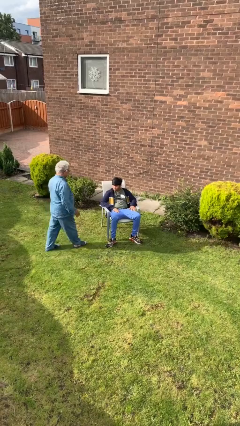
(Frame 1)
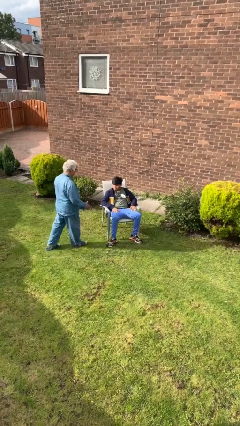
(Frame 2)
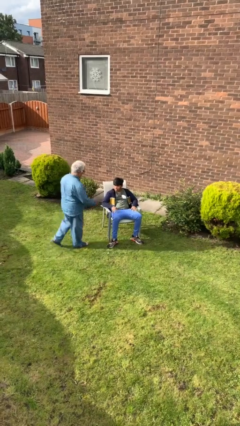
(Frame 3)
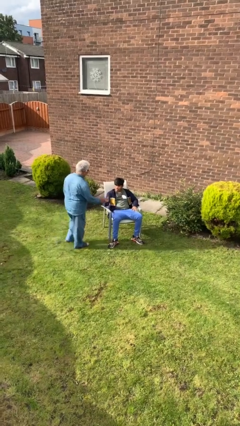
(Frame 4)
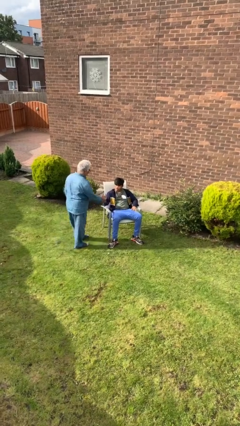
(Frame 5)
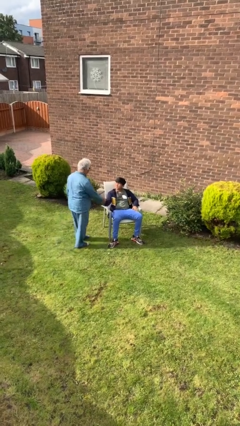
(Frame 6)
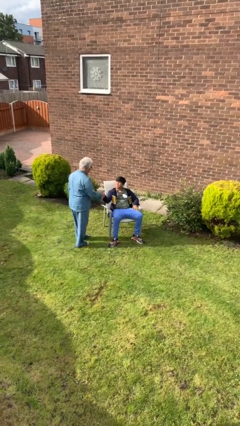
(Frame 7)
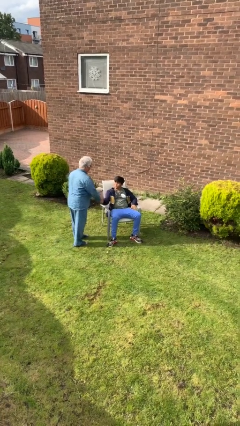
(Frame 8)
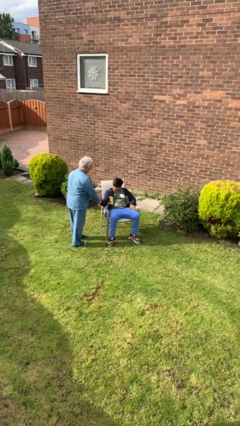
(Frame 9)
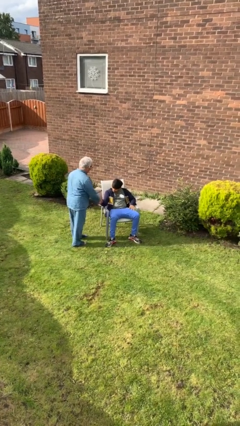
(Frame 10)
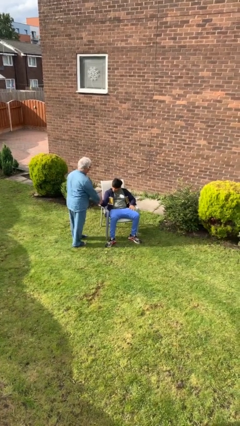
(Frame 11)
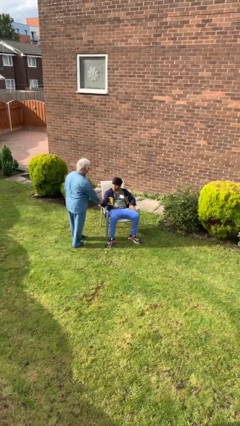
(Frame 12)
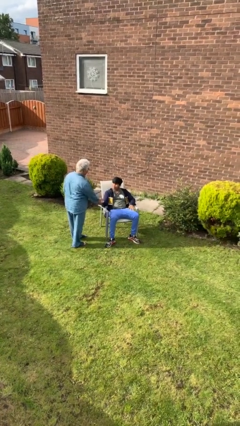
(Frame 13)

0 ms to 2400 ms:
person shakes hand

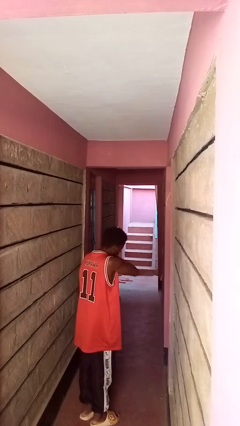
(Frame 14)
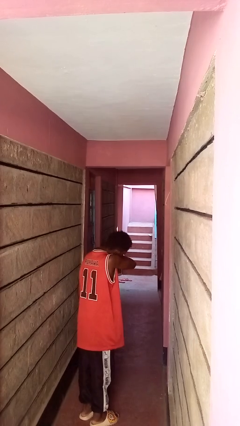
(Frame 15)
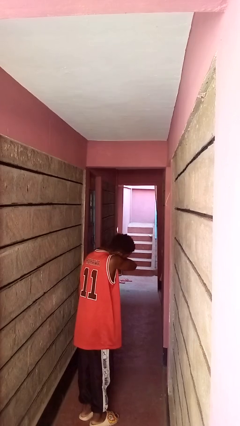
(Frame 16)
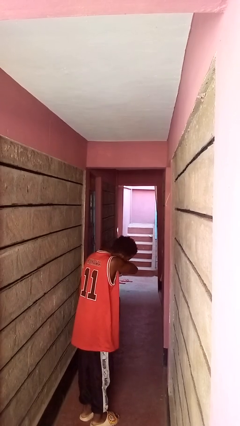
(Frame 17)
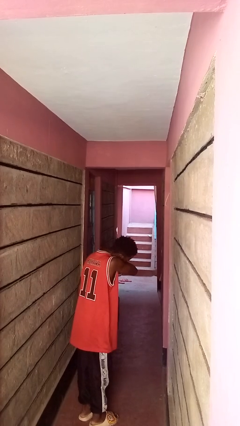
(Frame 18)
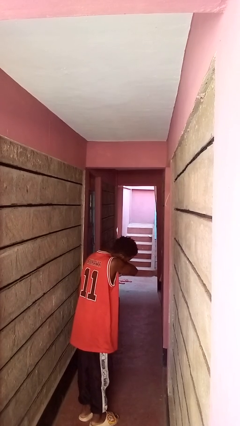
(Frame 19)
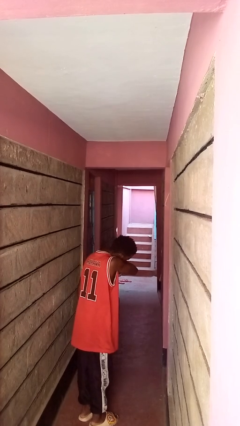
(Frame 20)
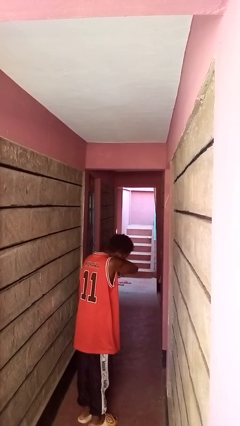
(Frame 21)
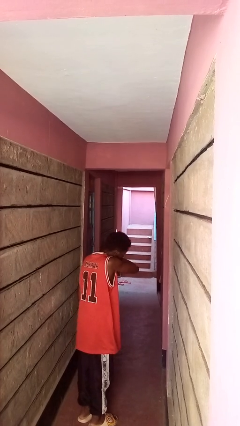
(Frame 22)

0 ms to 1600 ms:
person sneezes into arm

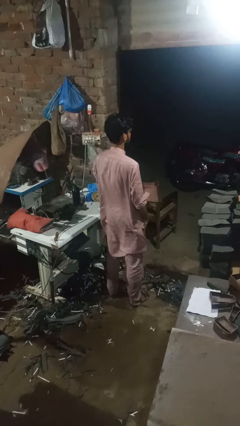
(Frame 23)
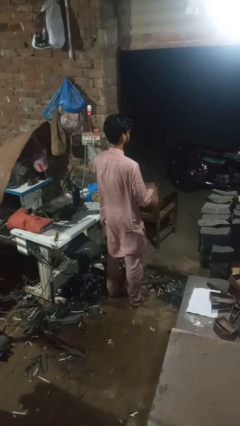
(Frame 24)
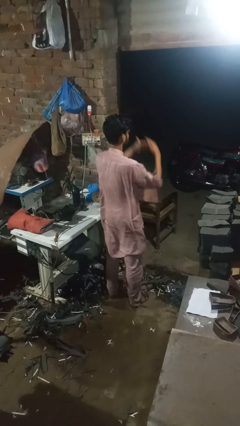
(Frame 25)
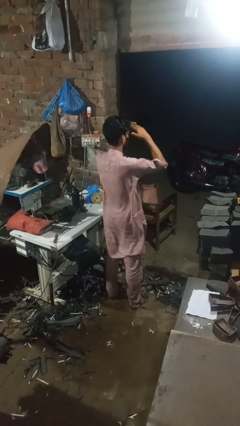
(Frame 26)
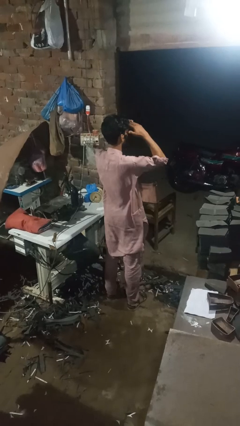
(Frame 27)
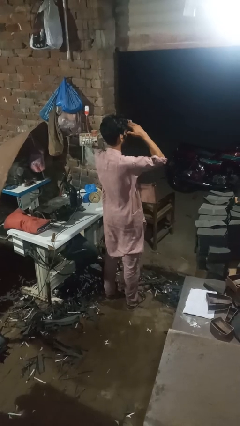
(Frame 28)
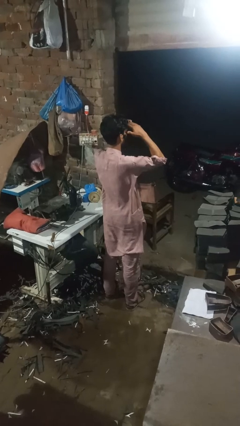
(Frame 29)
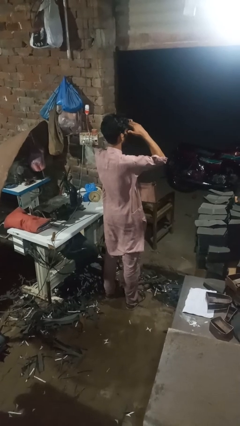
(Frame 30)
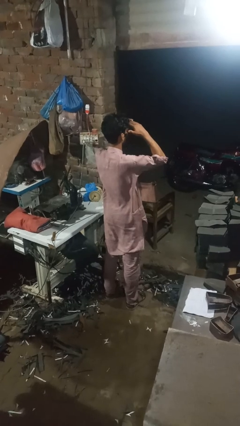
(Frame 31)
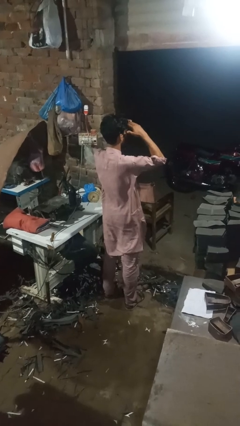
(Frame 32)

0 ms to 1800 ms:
person shades eyes

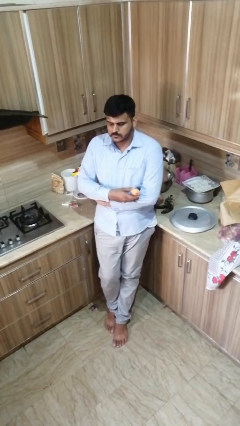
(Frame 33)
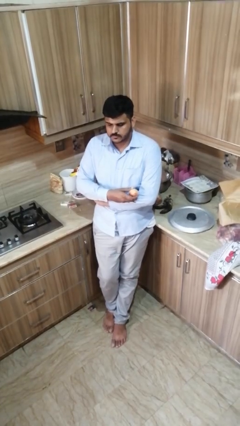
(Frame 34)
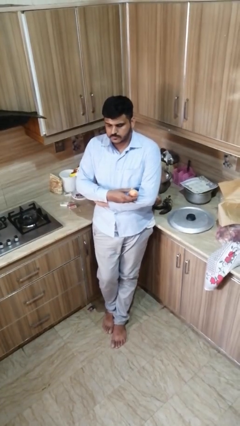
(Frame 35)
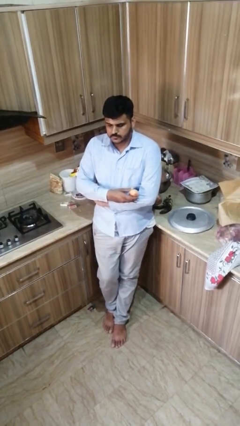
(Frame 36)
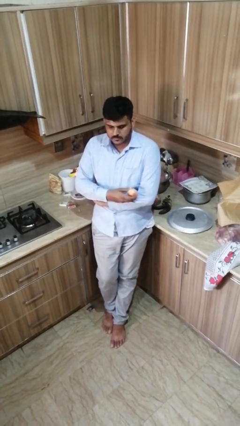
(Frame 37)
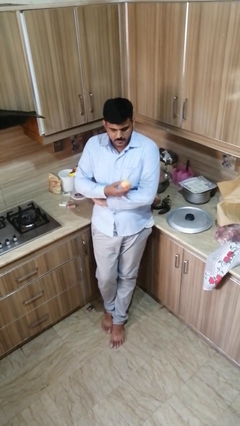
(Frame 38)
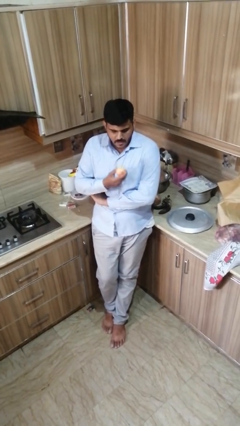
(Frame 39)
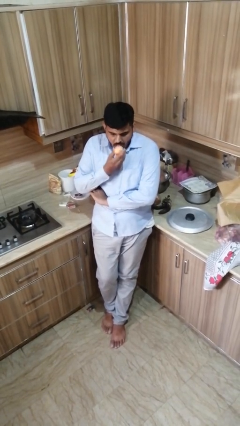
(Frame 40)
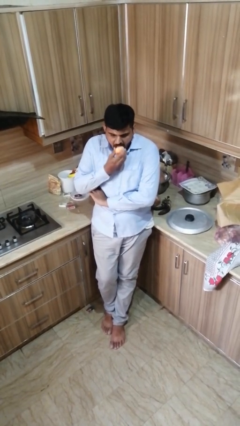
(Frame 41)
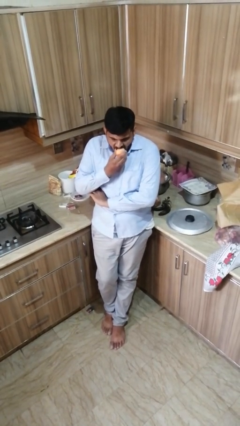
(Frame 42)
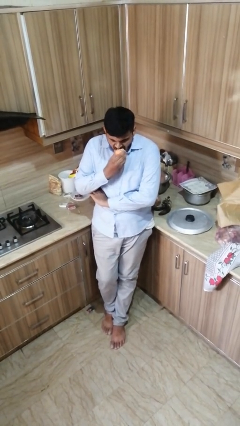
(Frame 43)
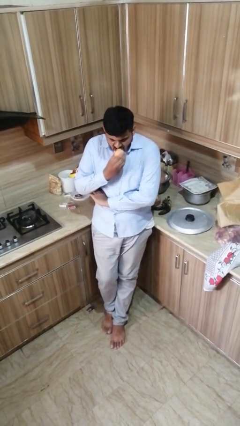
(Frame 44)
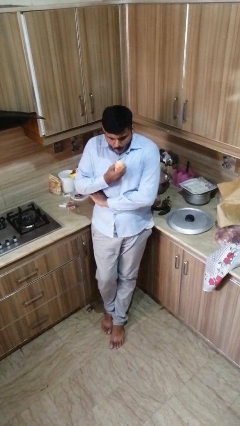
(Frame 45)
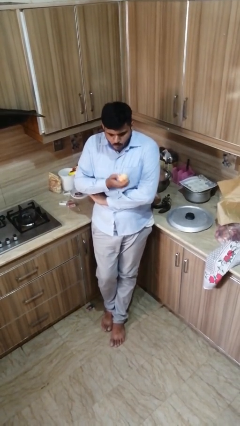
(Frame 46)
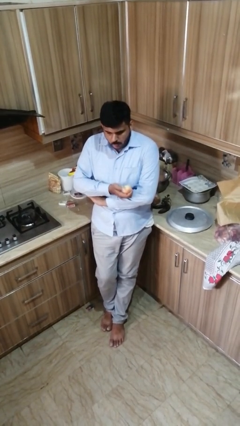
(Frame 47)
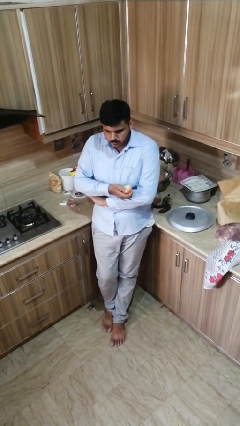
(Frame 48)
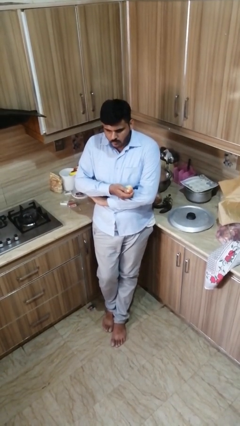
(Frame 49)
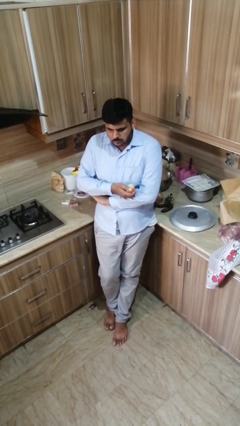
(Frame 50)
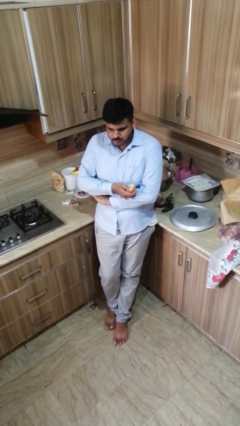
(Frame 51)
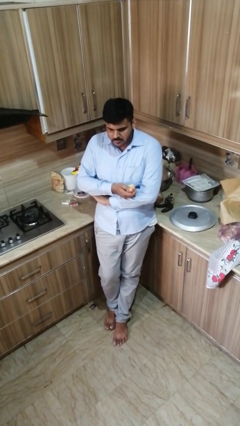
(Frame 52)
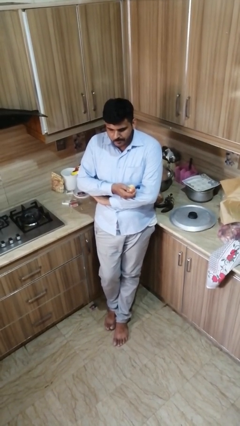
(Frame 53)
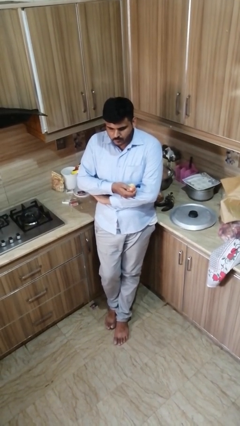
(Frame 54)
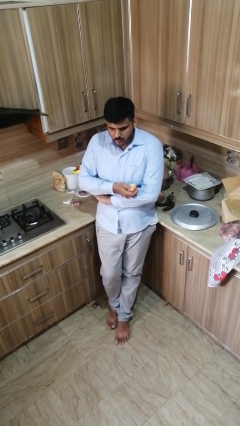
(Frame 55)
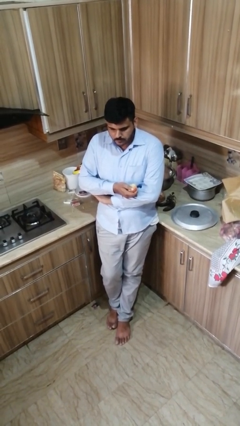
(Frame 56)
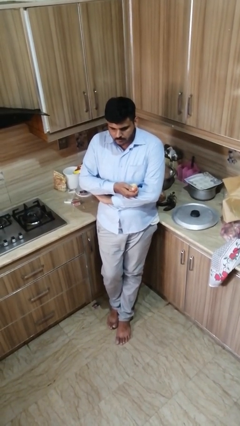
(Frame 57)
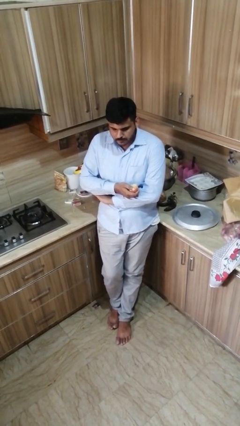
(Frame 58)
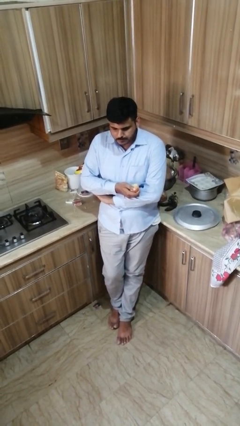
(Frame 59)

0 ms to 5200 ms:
person eats apple

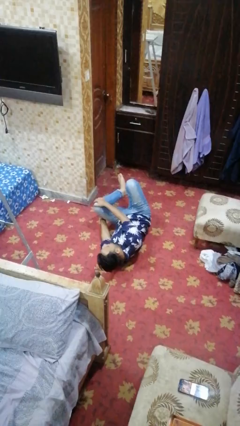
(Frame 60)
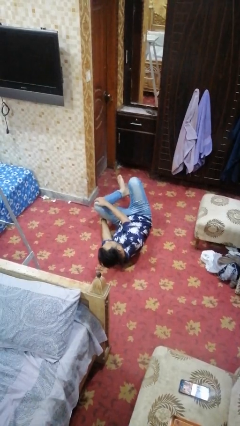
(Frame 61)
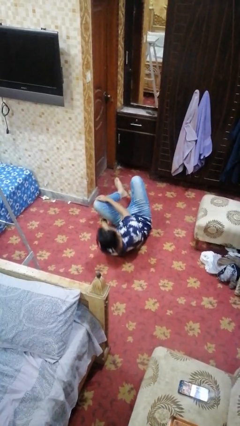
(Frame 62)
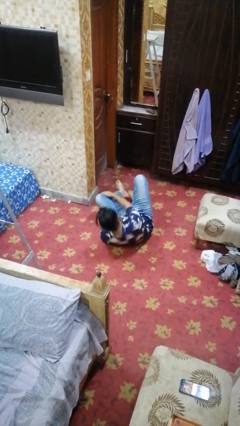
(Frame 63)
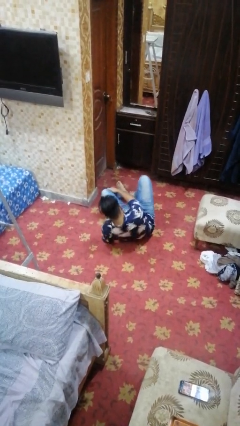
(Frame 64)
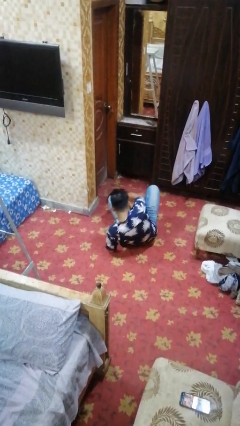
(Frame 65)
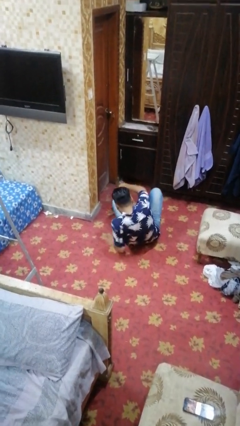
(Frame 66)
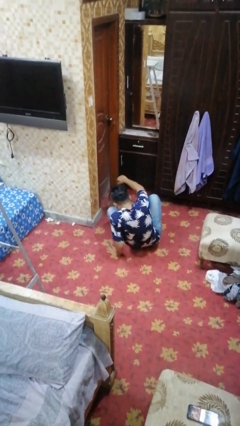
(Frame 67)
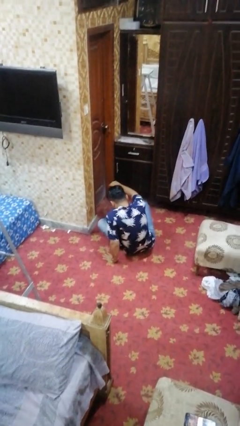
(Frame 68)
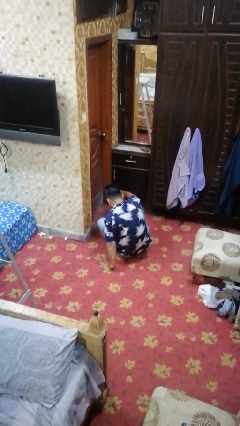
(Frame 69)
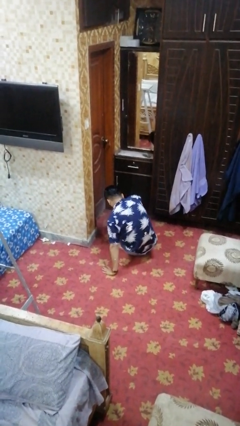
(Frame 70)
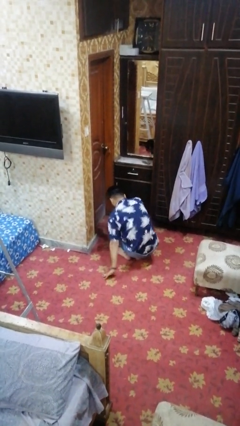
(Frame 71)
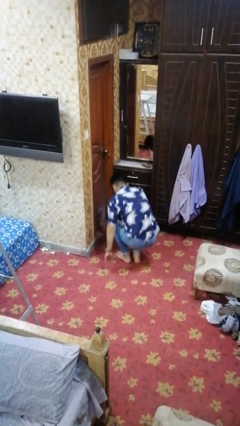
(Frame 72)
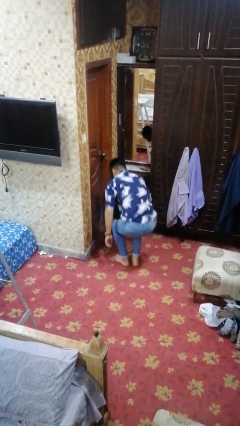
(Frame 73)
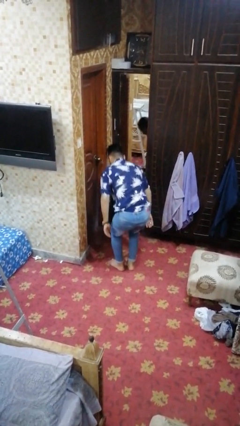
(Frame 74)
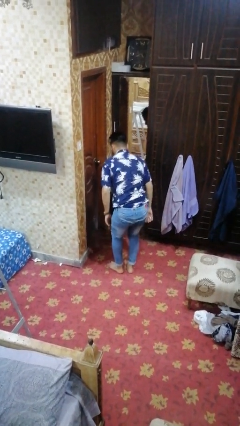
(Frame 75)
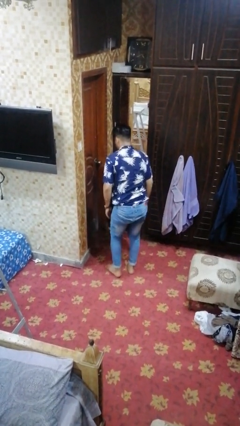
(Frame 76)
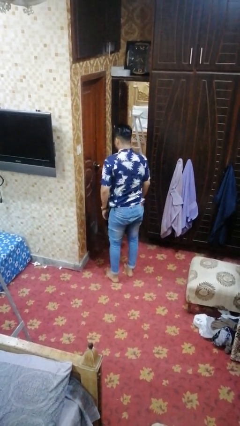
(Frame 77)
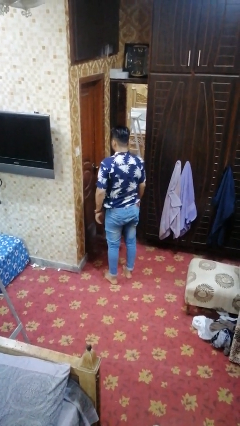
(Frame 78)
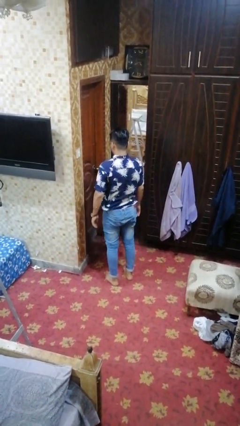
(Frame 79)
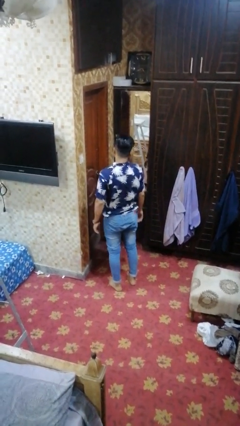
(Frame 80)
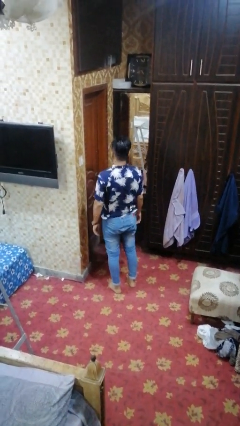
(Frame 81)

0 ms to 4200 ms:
person stands up from floor

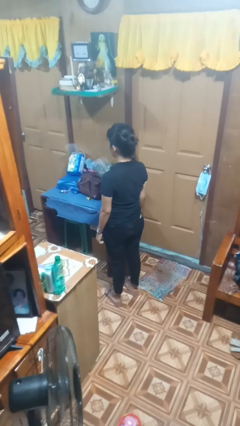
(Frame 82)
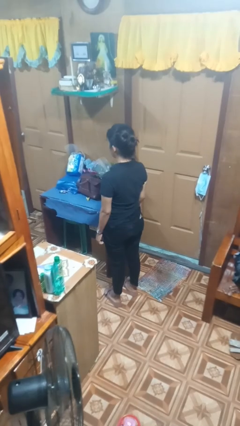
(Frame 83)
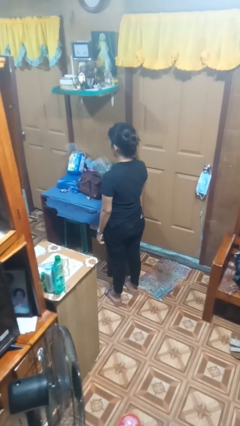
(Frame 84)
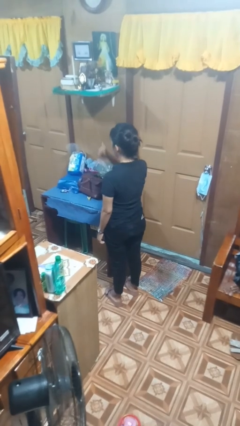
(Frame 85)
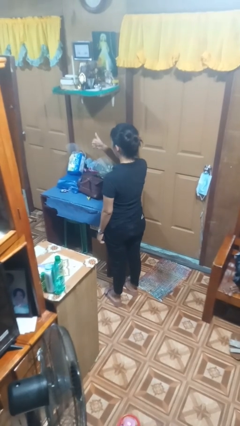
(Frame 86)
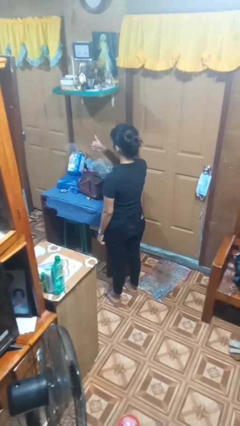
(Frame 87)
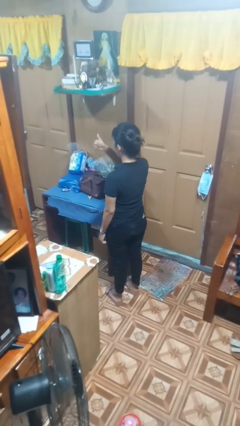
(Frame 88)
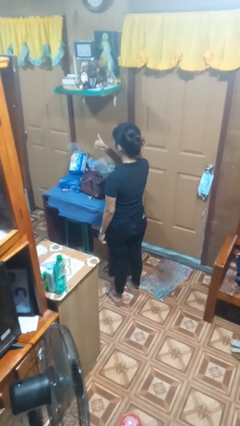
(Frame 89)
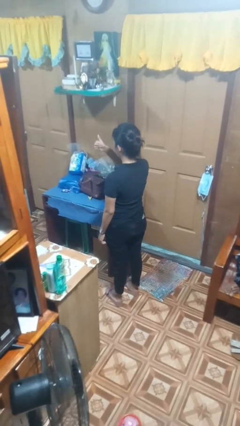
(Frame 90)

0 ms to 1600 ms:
person gestures thumbs up

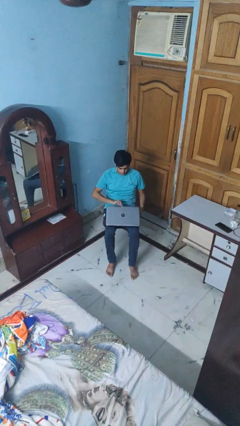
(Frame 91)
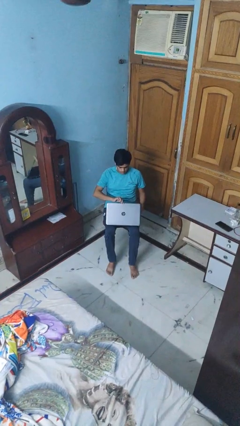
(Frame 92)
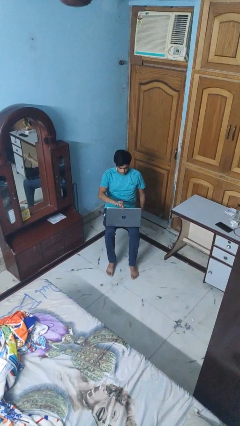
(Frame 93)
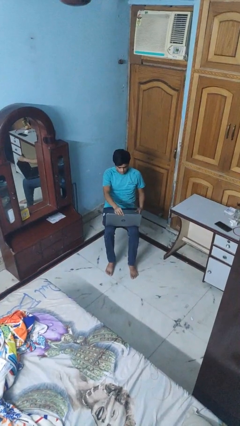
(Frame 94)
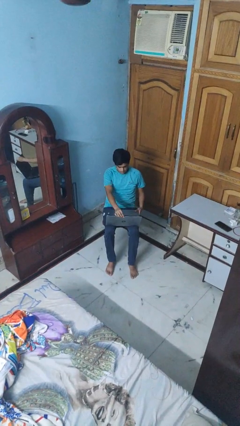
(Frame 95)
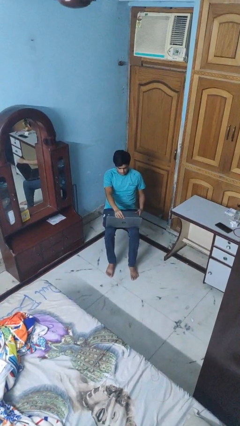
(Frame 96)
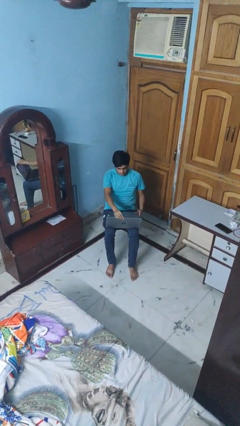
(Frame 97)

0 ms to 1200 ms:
person opens laptop
